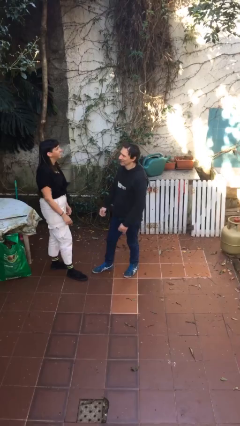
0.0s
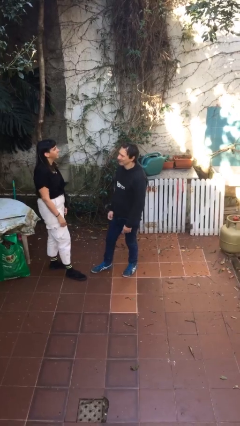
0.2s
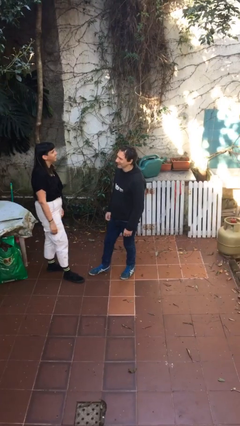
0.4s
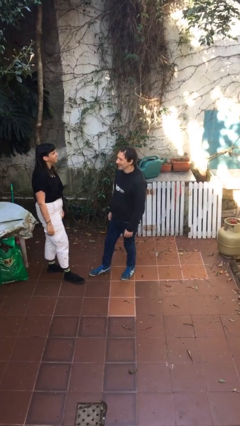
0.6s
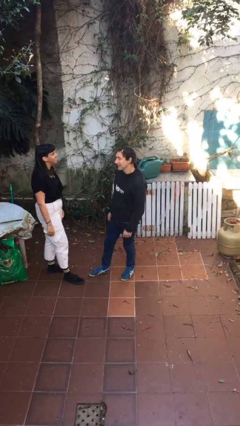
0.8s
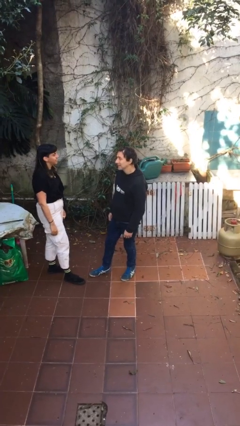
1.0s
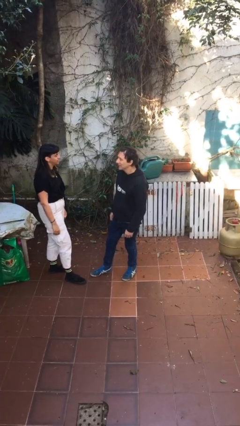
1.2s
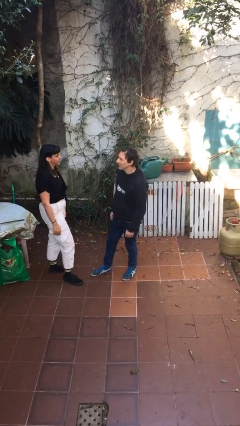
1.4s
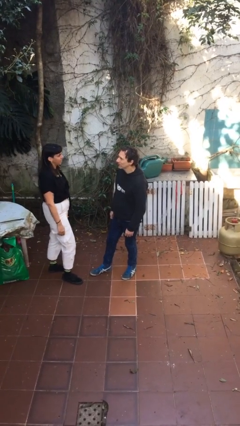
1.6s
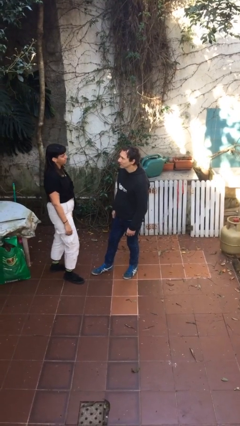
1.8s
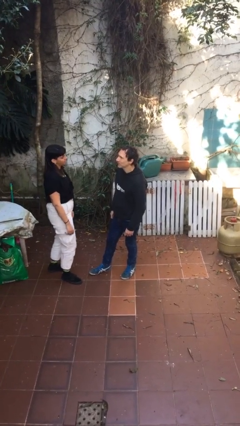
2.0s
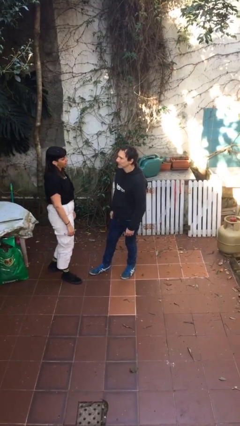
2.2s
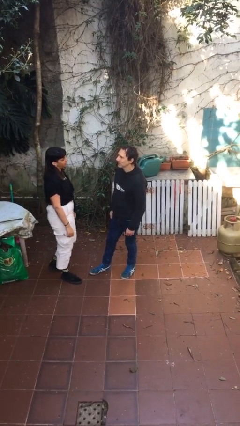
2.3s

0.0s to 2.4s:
person talks to person

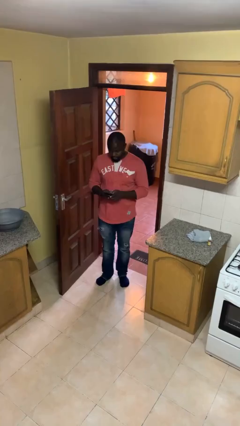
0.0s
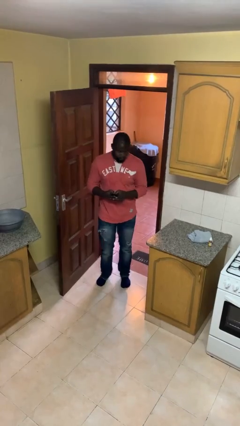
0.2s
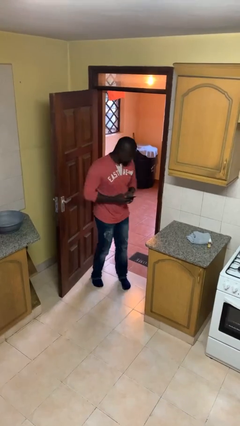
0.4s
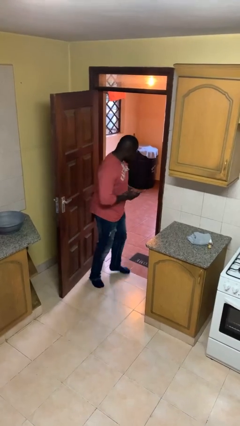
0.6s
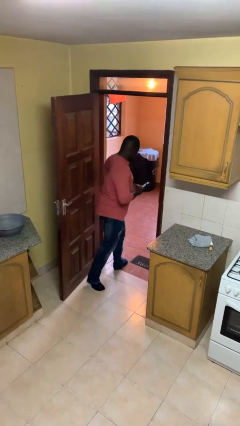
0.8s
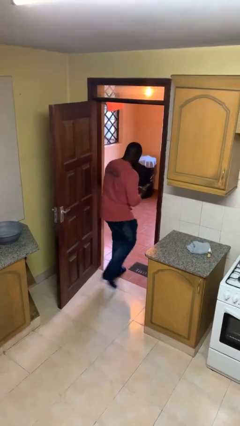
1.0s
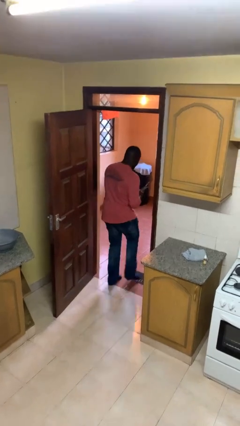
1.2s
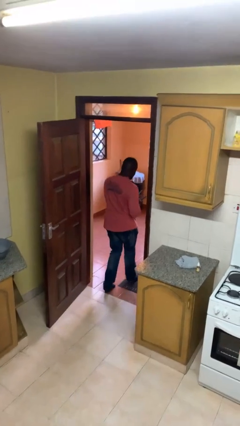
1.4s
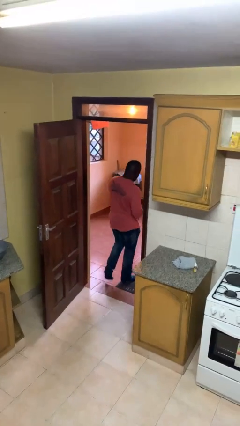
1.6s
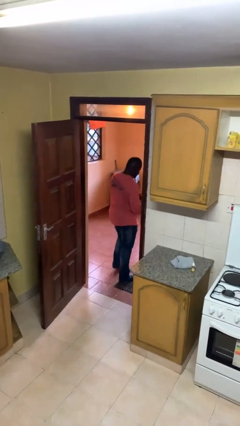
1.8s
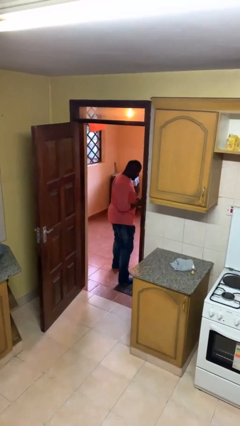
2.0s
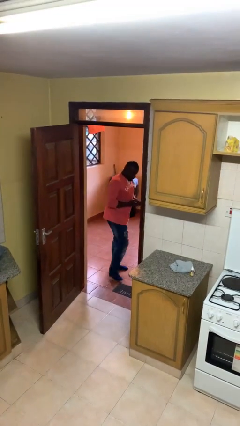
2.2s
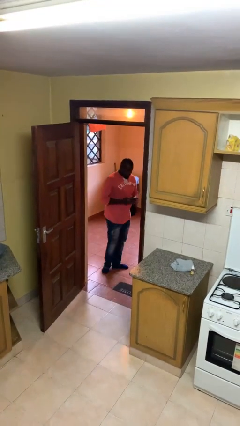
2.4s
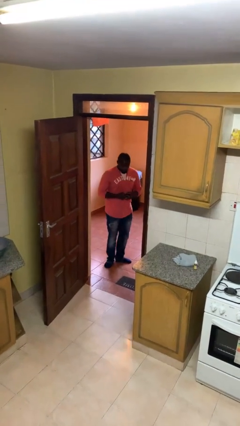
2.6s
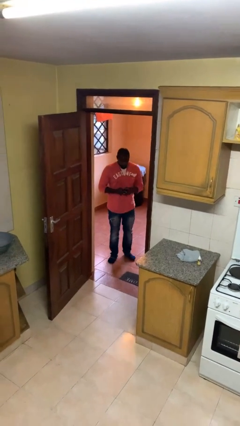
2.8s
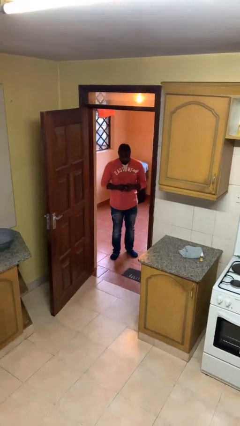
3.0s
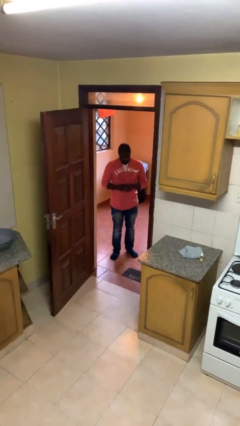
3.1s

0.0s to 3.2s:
person exits scene through structure

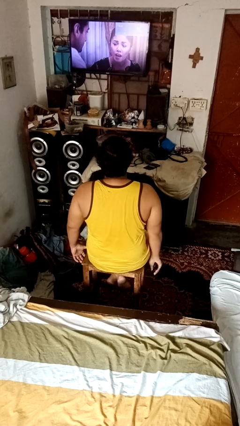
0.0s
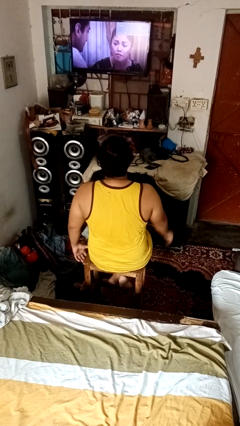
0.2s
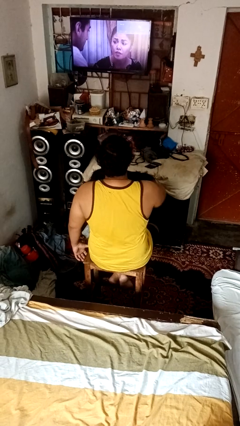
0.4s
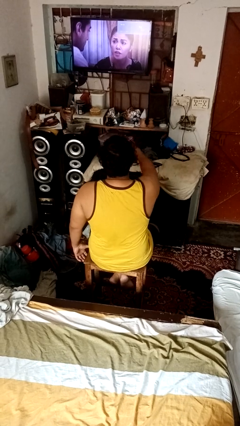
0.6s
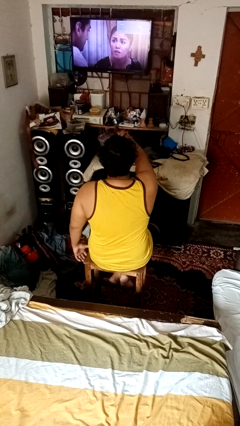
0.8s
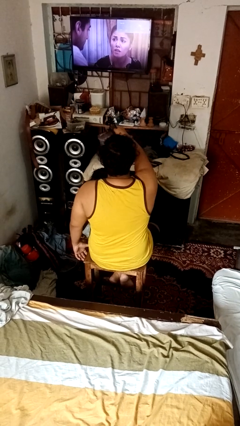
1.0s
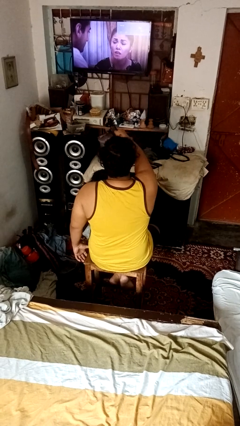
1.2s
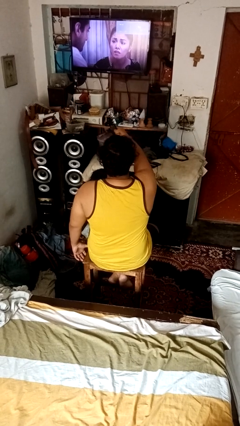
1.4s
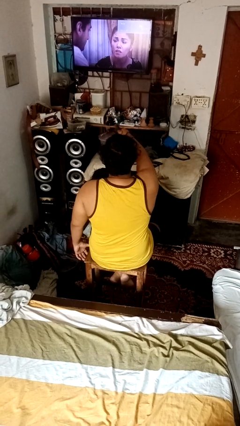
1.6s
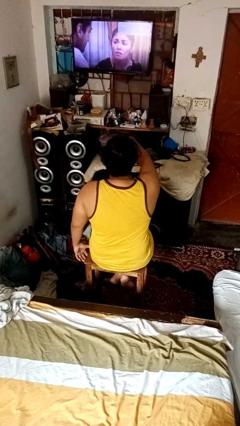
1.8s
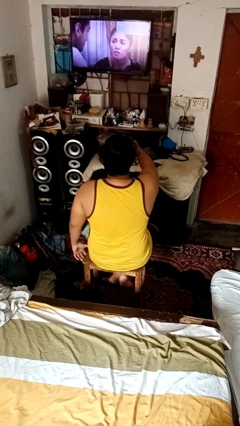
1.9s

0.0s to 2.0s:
person uses television remote

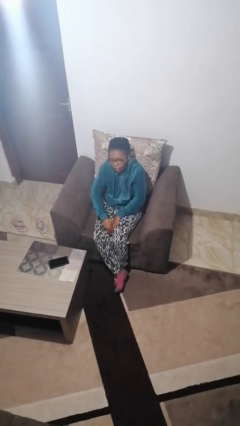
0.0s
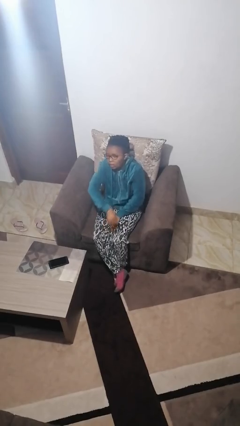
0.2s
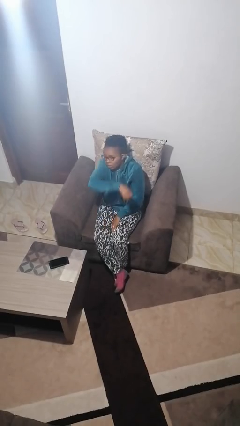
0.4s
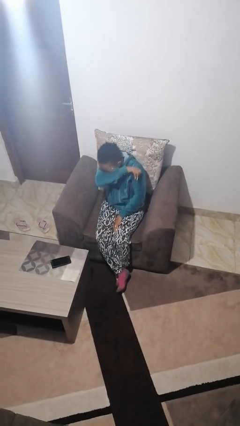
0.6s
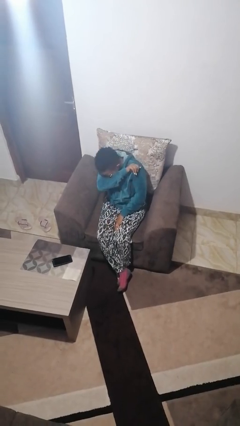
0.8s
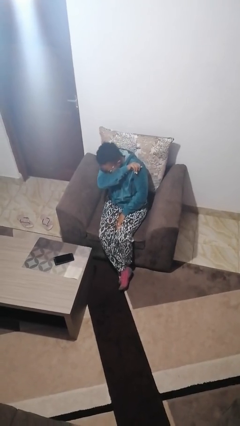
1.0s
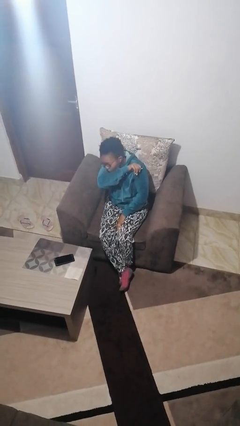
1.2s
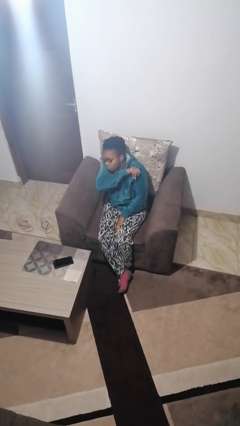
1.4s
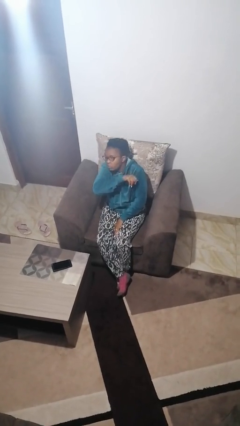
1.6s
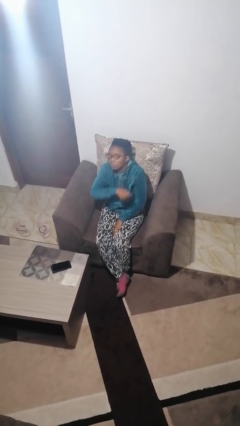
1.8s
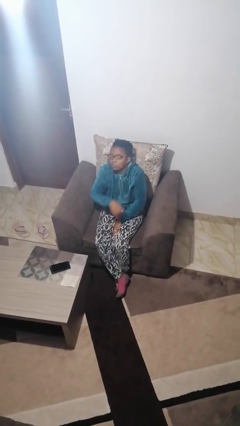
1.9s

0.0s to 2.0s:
person sneezes into arm

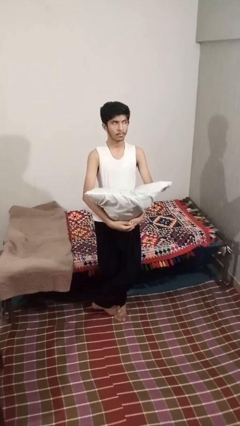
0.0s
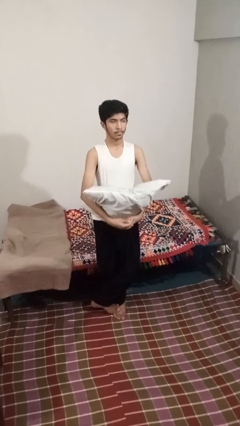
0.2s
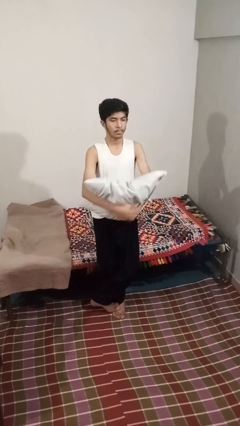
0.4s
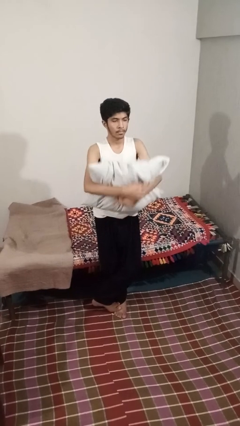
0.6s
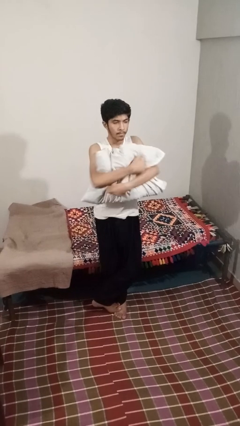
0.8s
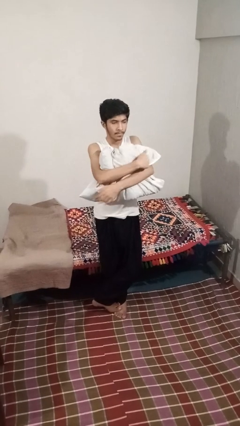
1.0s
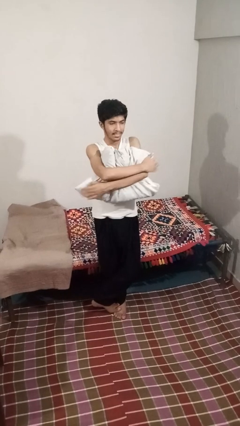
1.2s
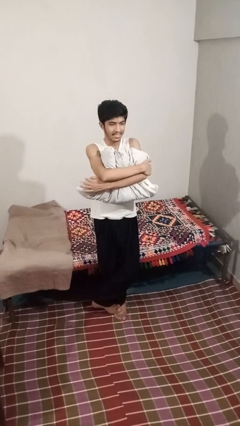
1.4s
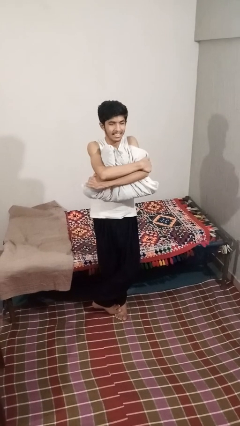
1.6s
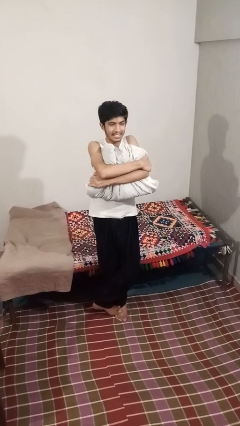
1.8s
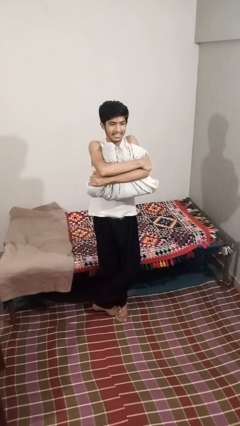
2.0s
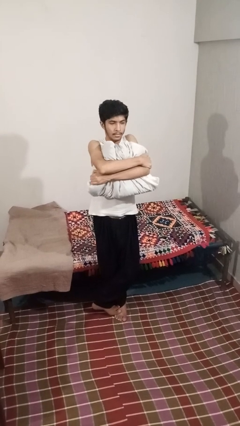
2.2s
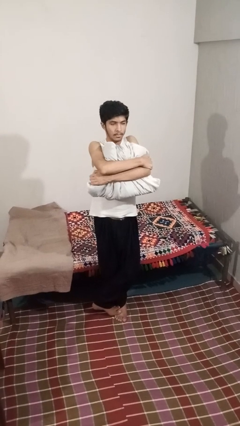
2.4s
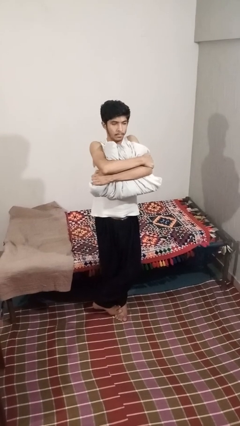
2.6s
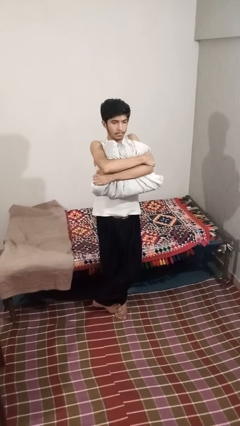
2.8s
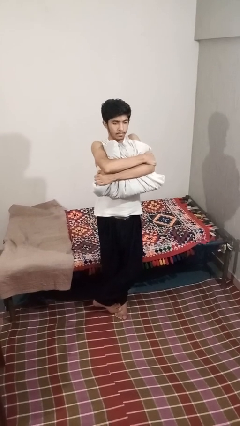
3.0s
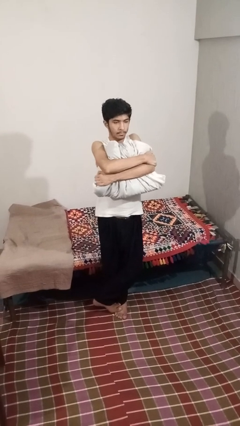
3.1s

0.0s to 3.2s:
person squeezes object

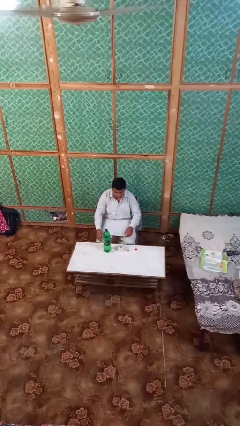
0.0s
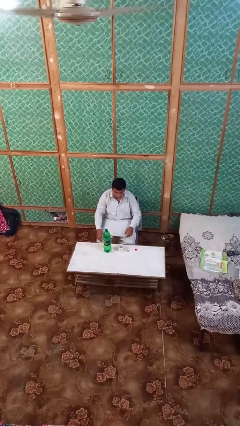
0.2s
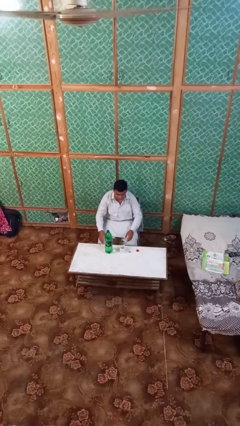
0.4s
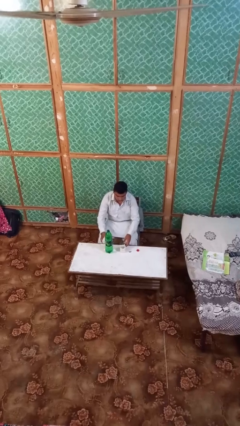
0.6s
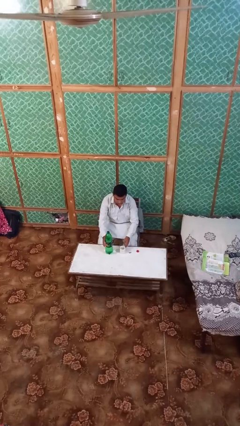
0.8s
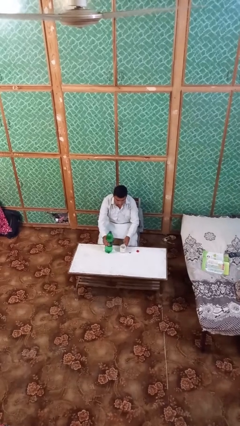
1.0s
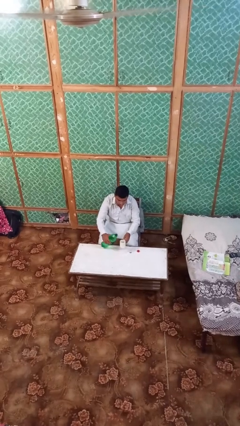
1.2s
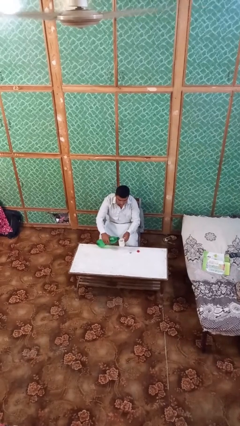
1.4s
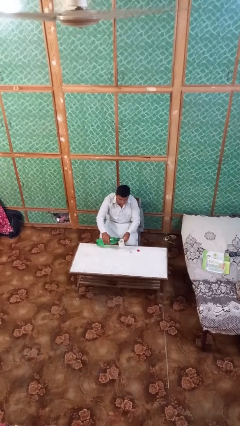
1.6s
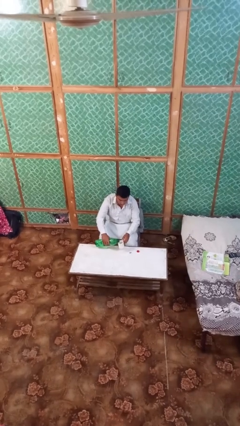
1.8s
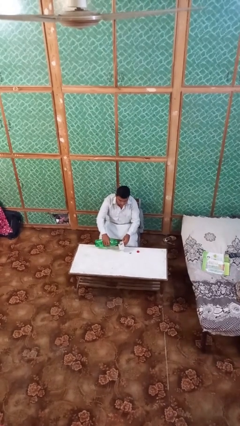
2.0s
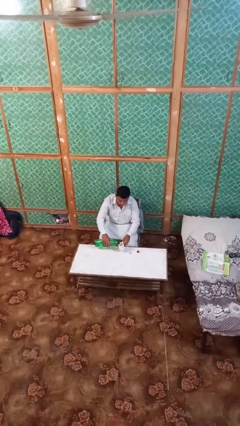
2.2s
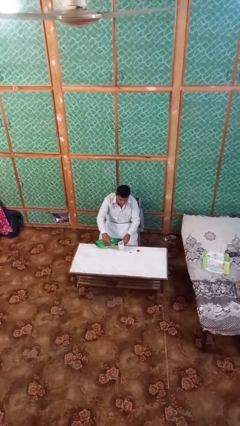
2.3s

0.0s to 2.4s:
person pours liquid into cup

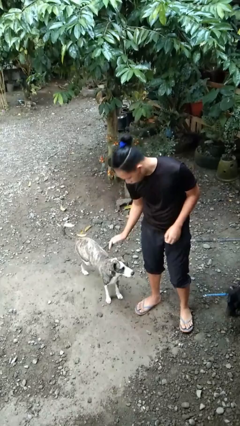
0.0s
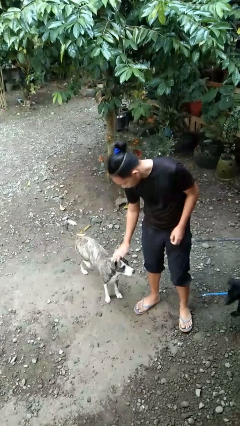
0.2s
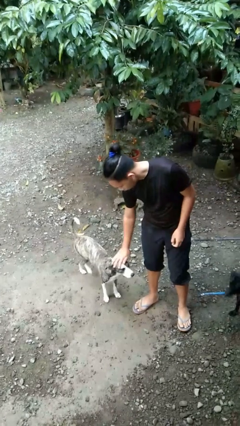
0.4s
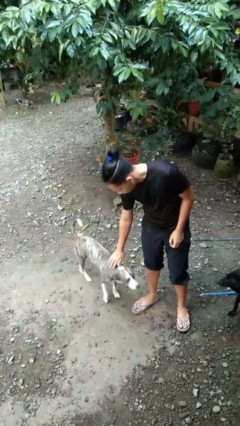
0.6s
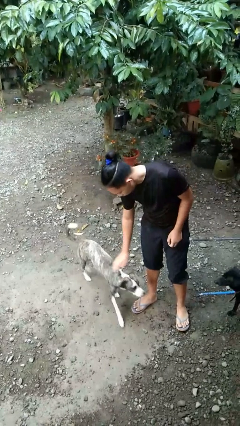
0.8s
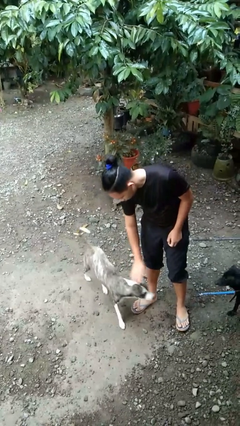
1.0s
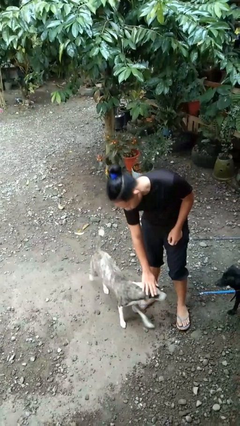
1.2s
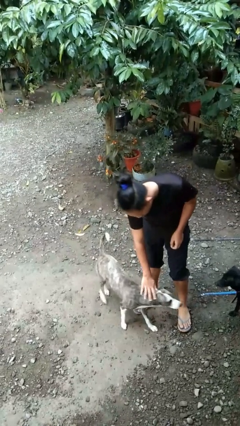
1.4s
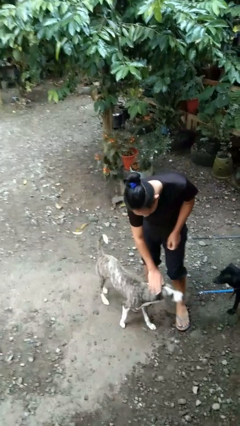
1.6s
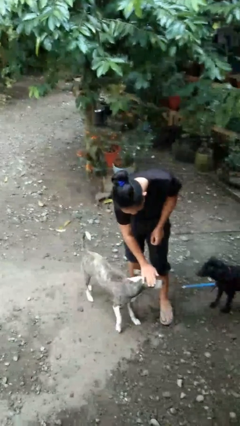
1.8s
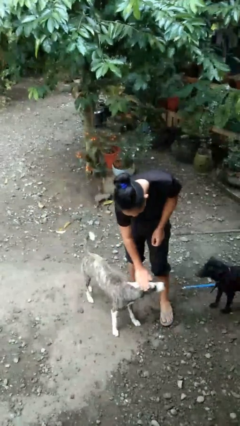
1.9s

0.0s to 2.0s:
person pets dog
